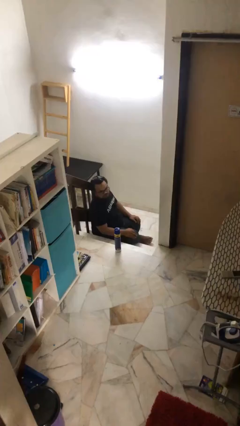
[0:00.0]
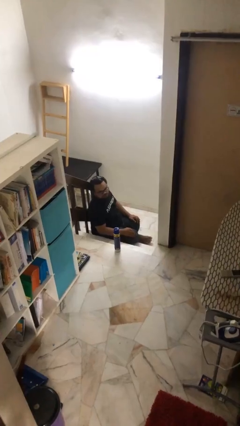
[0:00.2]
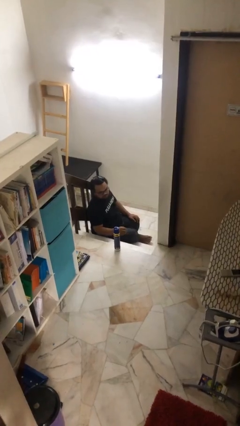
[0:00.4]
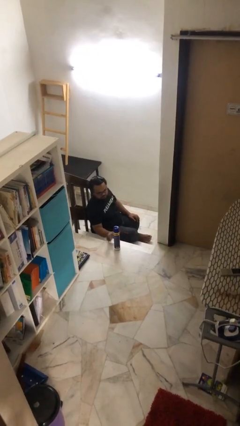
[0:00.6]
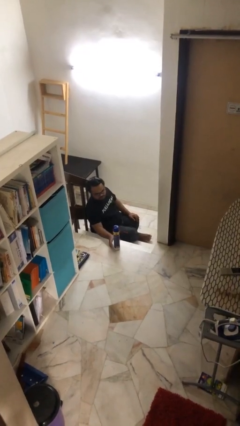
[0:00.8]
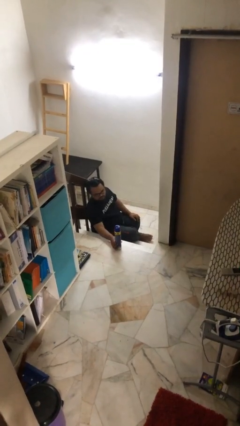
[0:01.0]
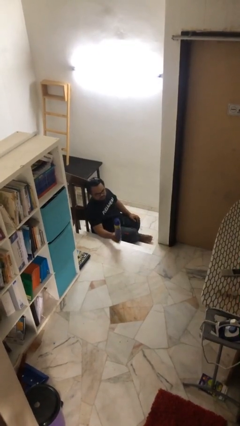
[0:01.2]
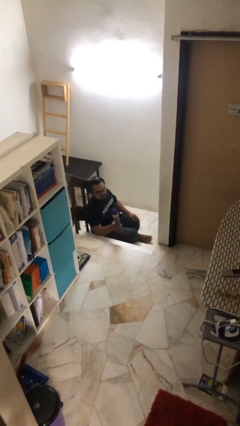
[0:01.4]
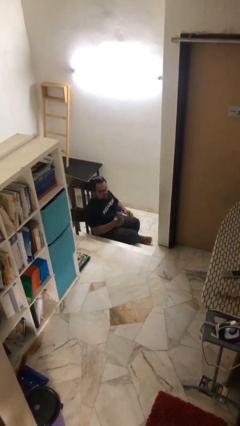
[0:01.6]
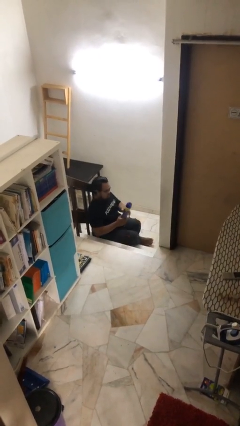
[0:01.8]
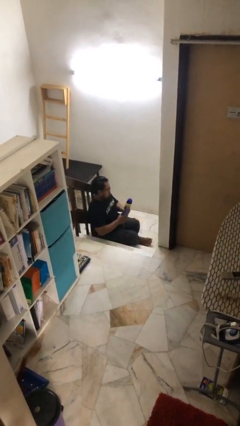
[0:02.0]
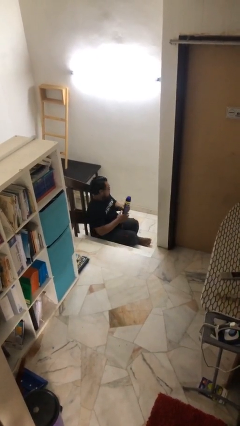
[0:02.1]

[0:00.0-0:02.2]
person picks up object from floor

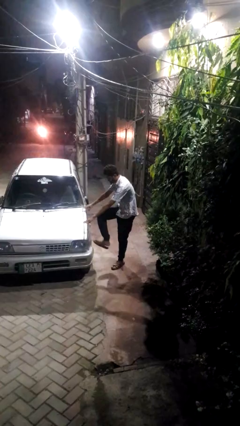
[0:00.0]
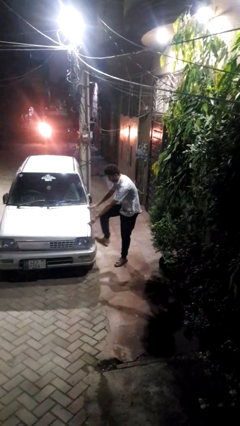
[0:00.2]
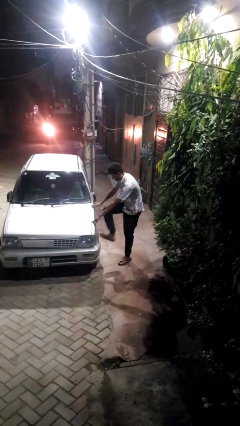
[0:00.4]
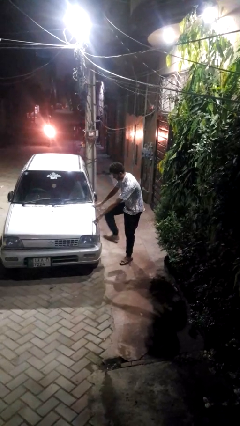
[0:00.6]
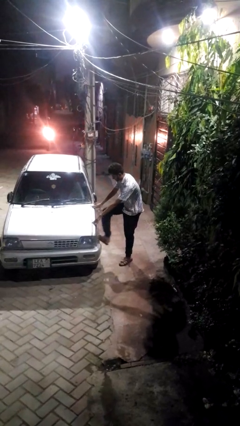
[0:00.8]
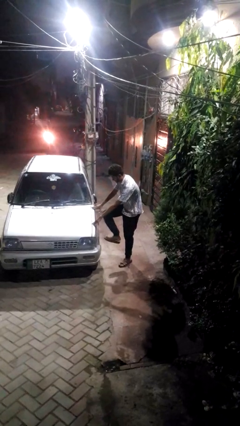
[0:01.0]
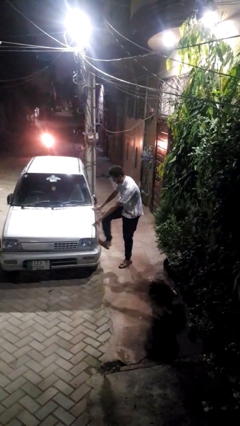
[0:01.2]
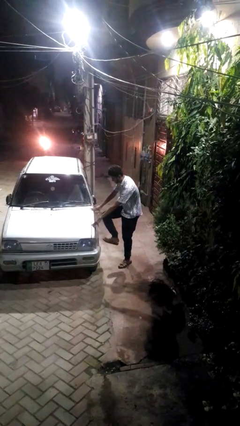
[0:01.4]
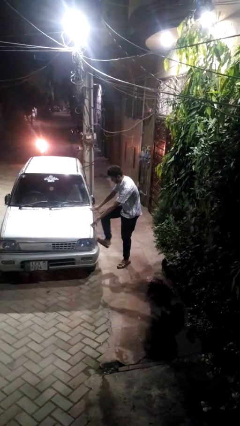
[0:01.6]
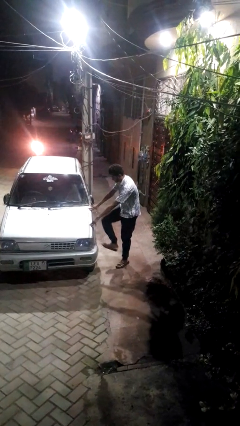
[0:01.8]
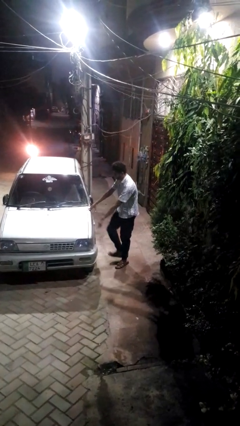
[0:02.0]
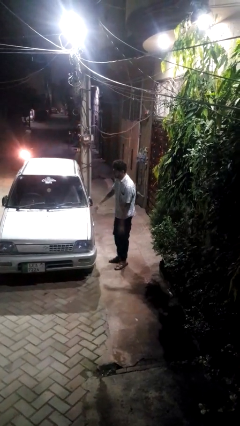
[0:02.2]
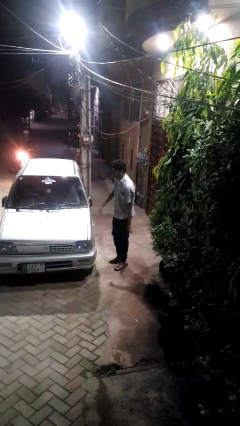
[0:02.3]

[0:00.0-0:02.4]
person kicks car tires

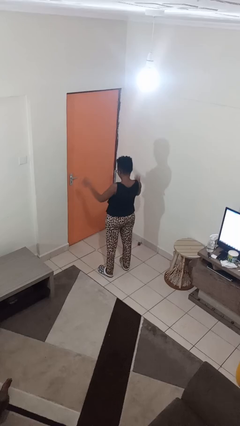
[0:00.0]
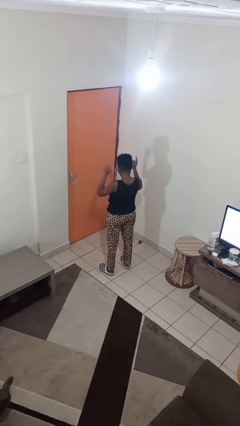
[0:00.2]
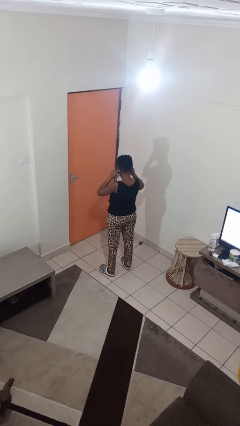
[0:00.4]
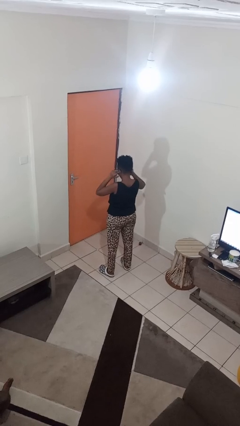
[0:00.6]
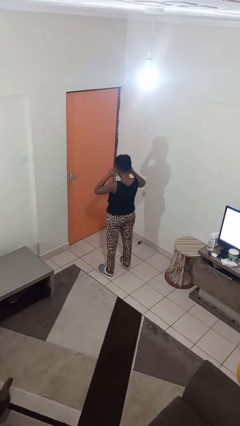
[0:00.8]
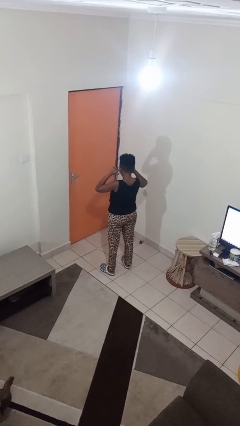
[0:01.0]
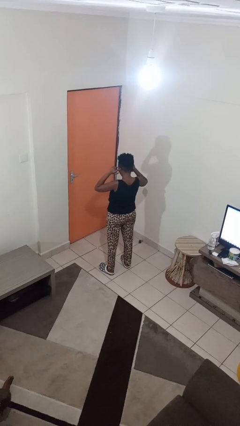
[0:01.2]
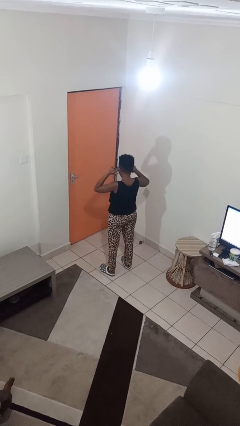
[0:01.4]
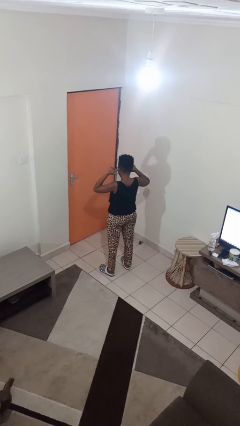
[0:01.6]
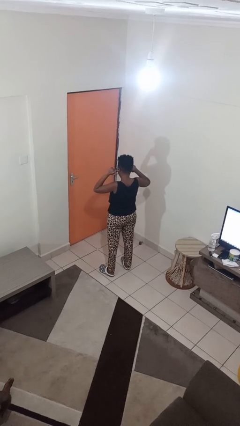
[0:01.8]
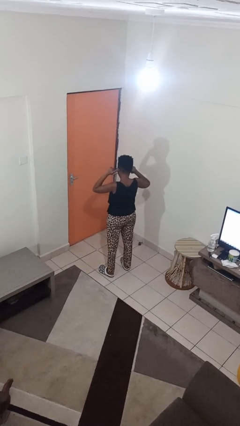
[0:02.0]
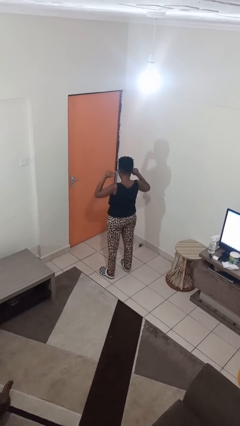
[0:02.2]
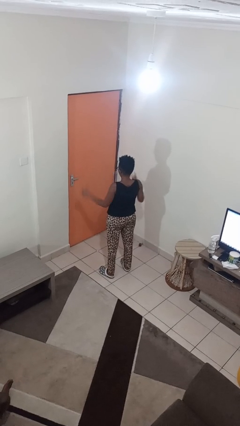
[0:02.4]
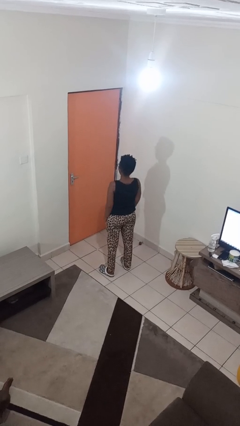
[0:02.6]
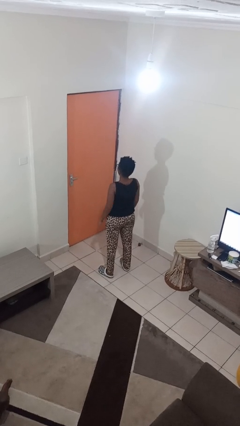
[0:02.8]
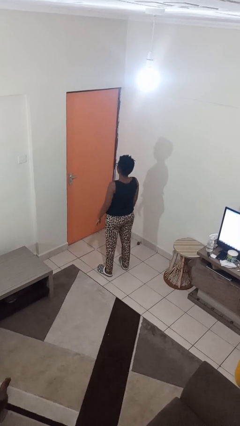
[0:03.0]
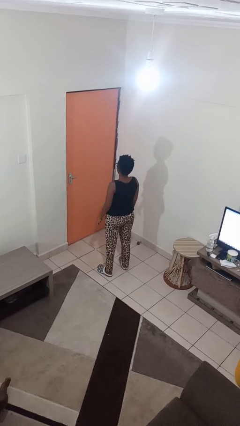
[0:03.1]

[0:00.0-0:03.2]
person puts fingers in ear

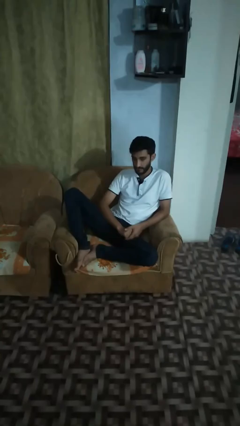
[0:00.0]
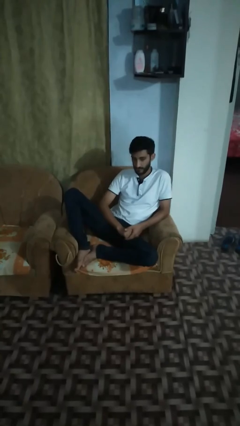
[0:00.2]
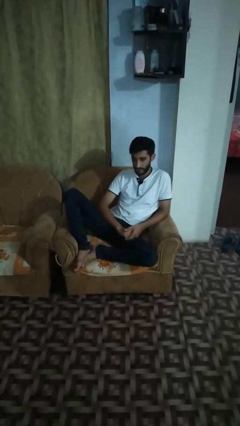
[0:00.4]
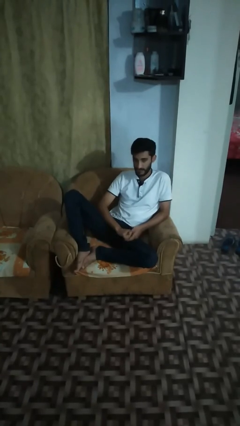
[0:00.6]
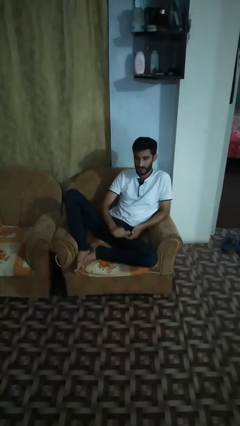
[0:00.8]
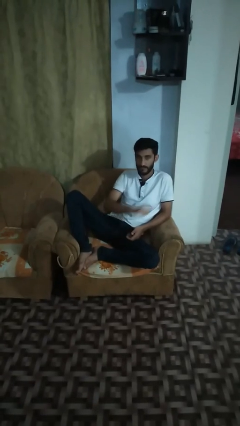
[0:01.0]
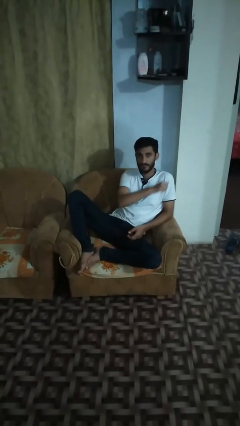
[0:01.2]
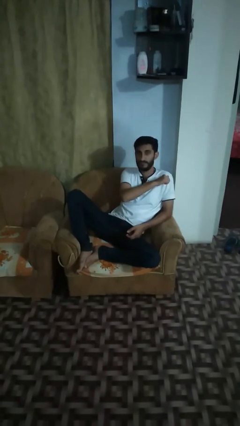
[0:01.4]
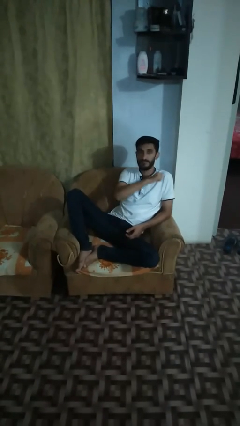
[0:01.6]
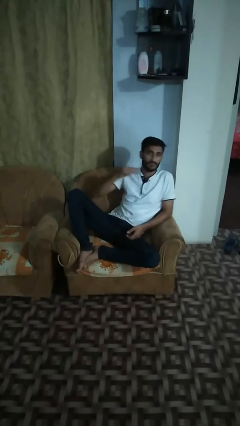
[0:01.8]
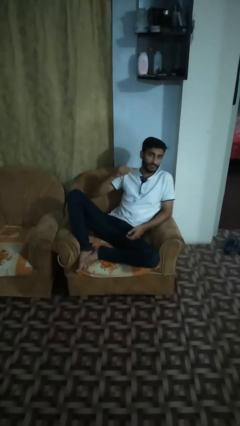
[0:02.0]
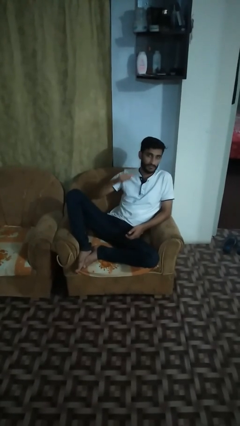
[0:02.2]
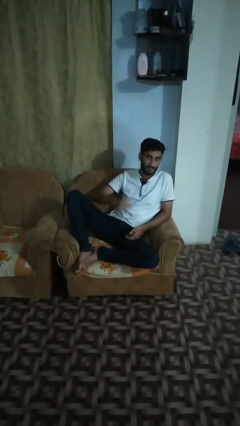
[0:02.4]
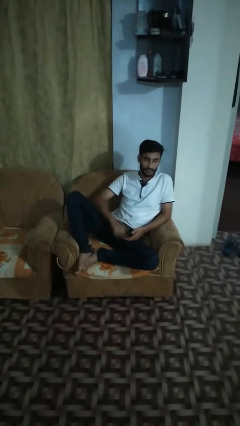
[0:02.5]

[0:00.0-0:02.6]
person gestures cut

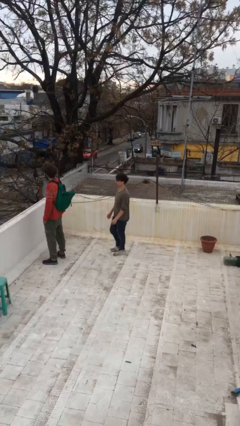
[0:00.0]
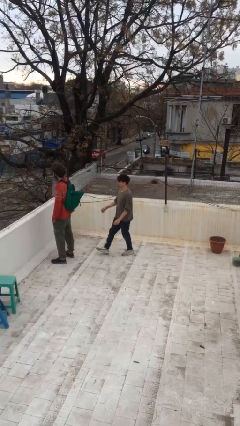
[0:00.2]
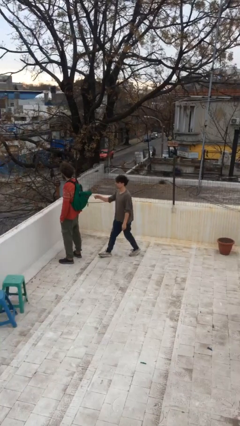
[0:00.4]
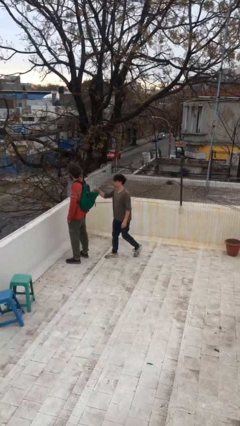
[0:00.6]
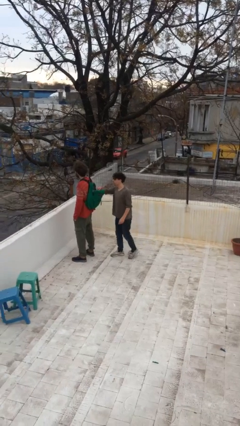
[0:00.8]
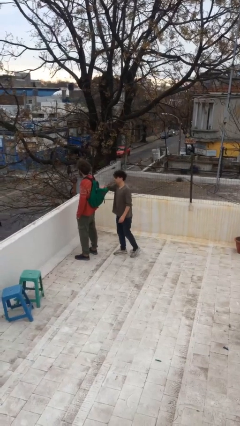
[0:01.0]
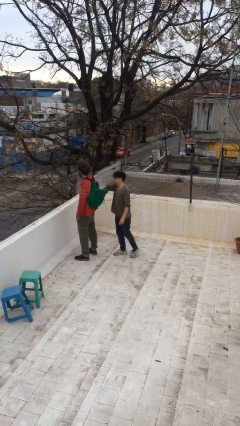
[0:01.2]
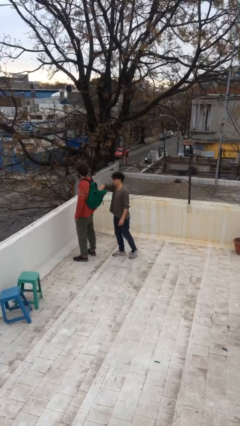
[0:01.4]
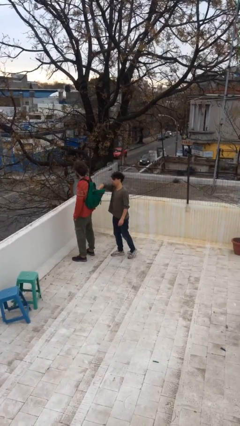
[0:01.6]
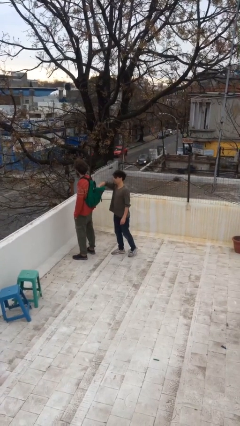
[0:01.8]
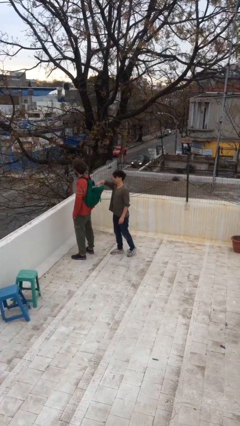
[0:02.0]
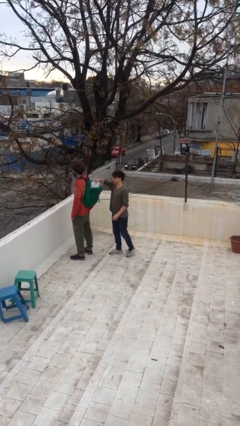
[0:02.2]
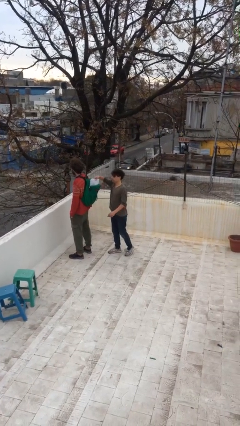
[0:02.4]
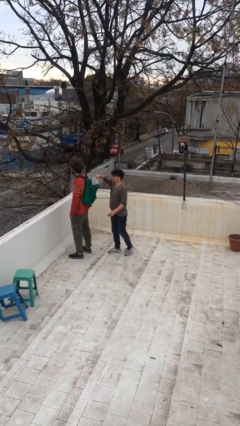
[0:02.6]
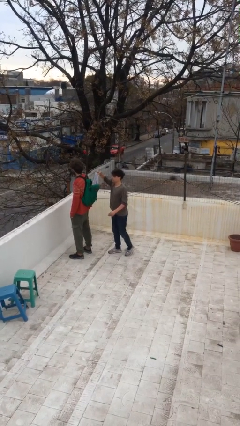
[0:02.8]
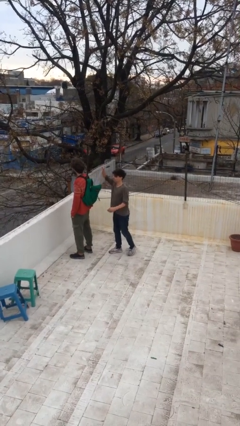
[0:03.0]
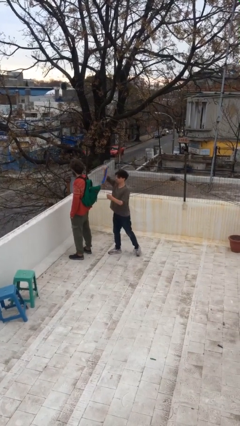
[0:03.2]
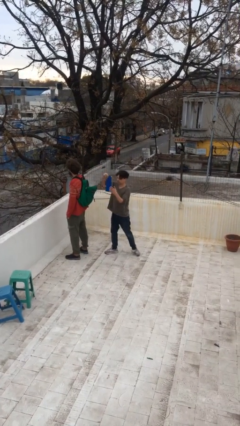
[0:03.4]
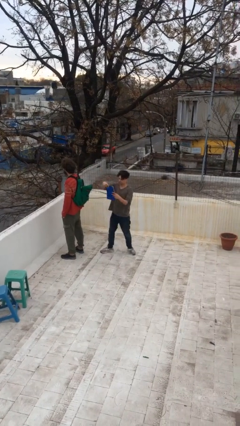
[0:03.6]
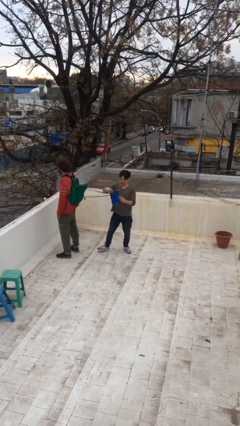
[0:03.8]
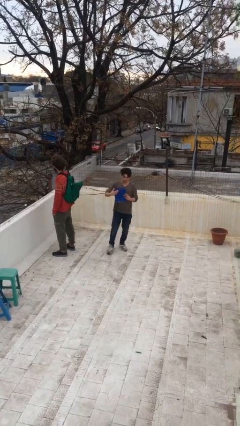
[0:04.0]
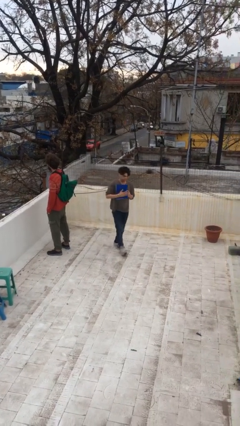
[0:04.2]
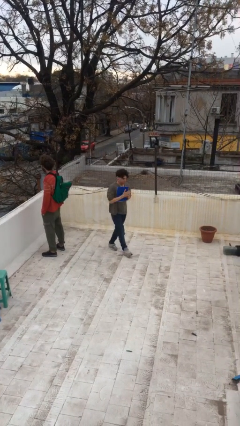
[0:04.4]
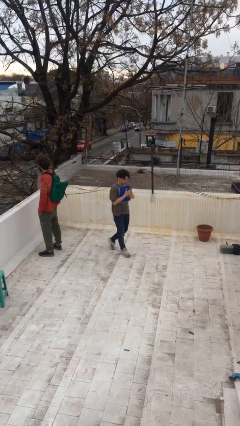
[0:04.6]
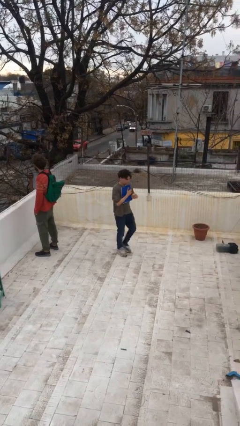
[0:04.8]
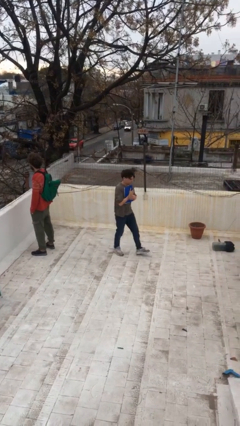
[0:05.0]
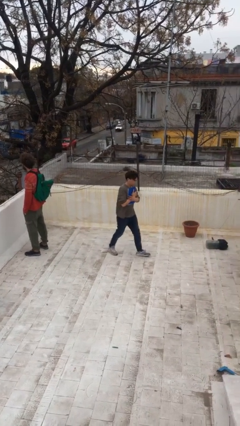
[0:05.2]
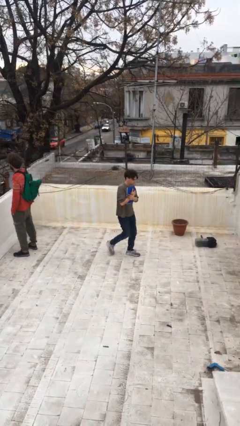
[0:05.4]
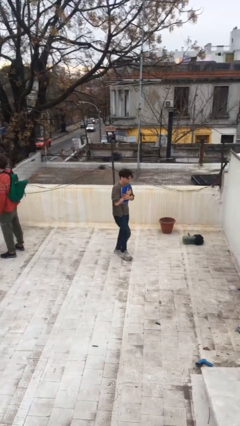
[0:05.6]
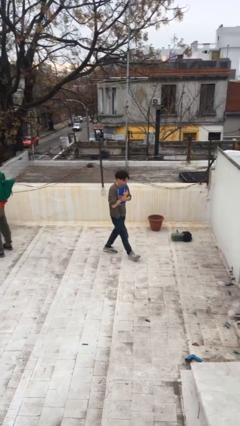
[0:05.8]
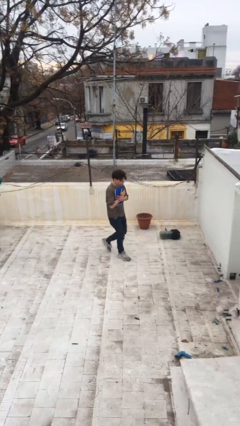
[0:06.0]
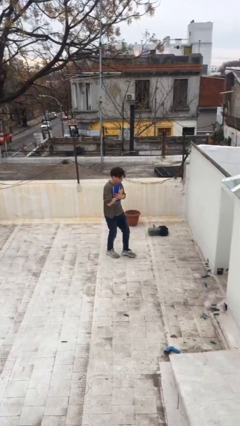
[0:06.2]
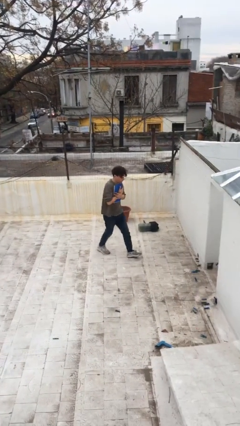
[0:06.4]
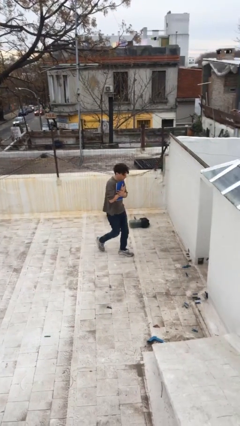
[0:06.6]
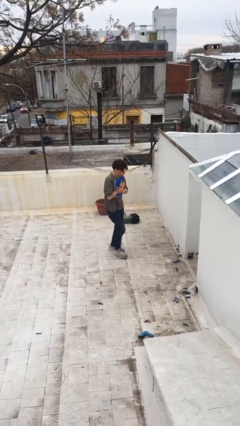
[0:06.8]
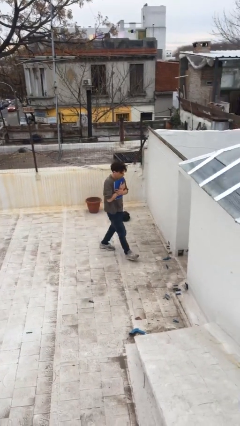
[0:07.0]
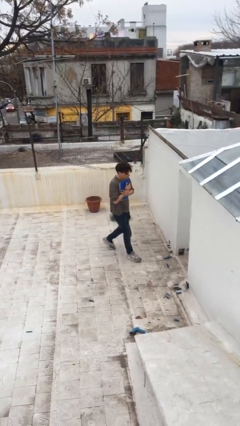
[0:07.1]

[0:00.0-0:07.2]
person steals object from person
